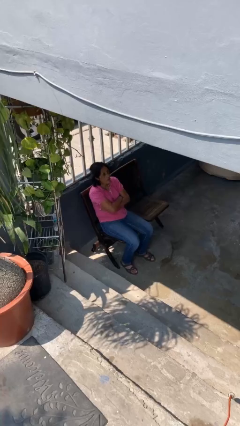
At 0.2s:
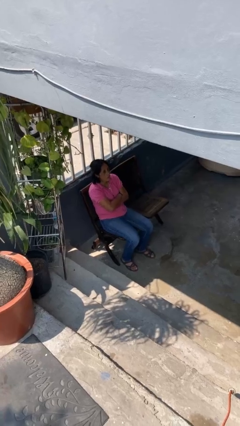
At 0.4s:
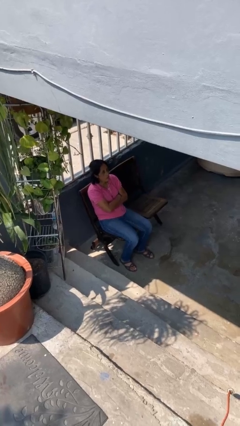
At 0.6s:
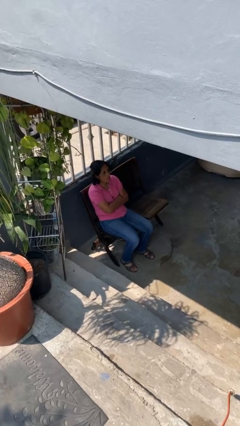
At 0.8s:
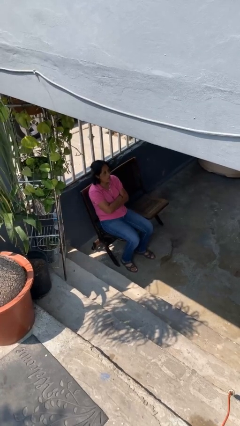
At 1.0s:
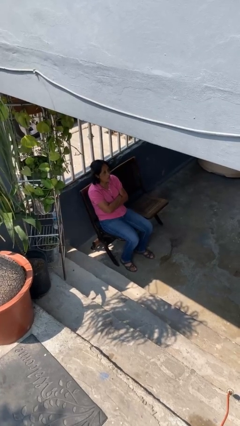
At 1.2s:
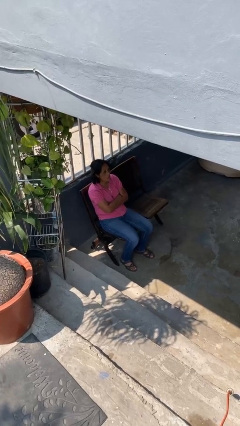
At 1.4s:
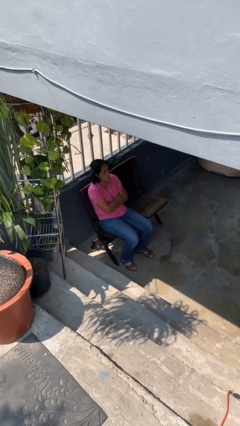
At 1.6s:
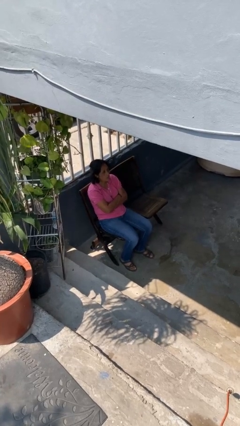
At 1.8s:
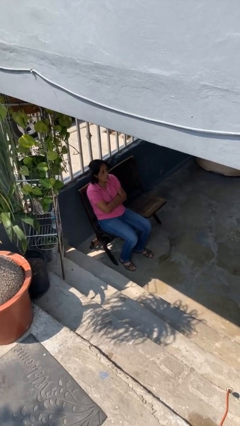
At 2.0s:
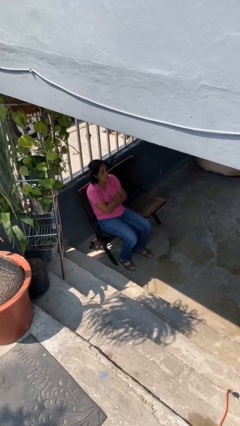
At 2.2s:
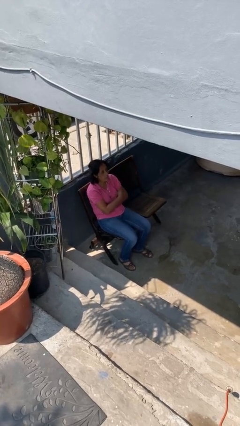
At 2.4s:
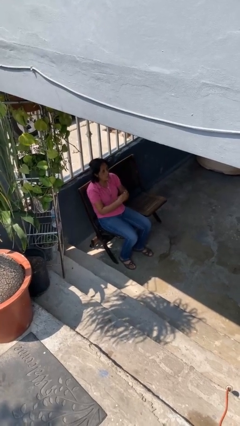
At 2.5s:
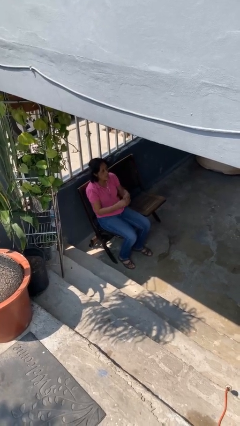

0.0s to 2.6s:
person crosses arms

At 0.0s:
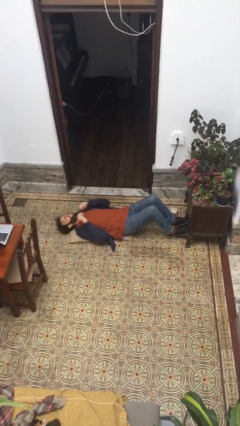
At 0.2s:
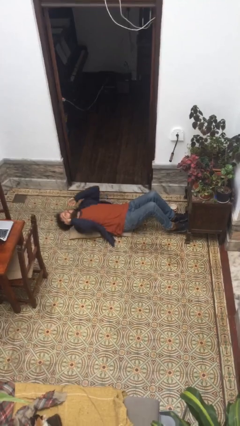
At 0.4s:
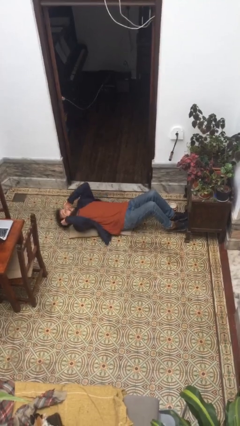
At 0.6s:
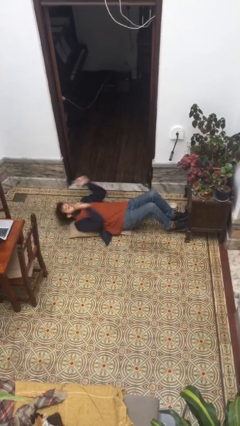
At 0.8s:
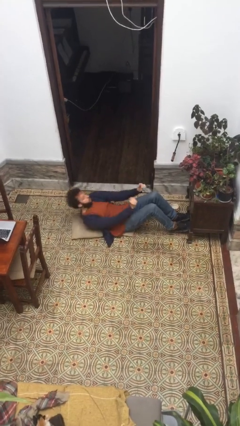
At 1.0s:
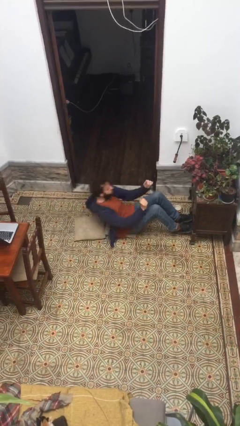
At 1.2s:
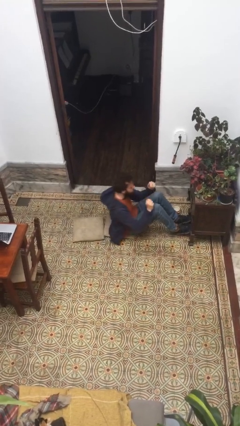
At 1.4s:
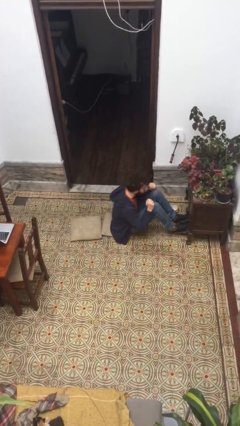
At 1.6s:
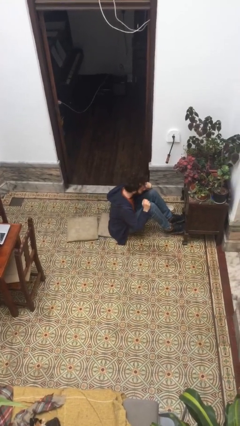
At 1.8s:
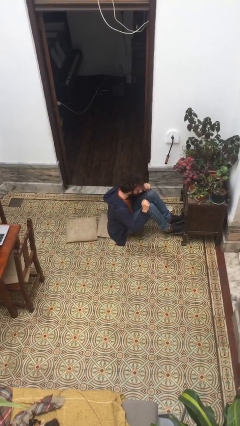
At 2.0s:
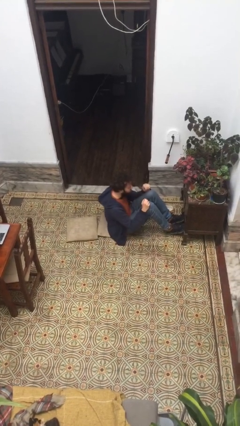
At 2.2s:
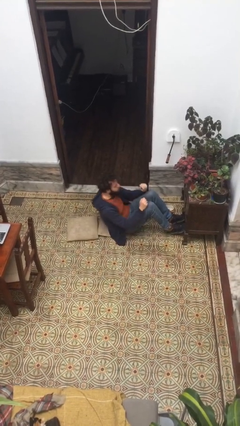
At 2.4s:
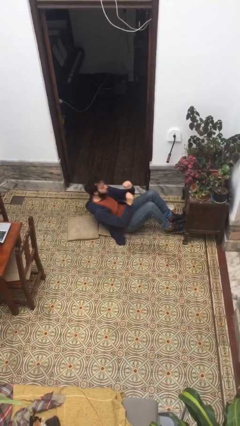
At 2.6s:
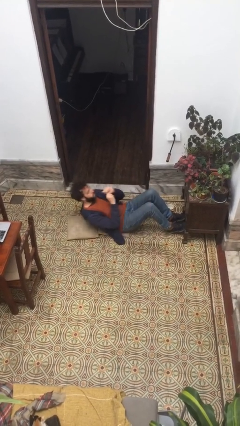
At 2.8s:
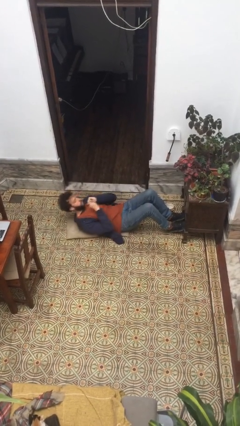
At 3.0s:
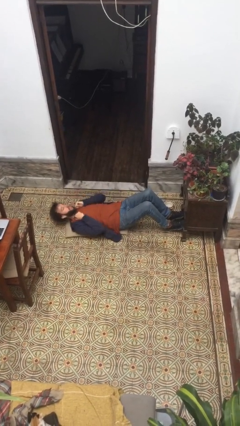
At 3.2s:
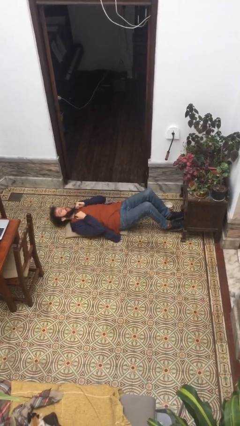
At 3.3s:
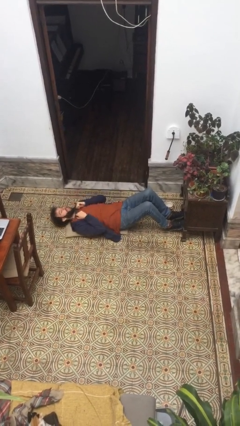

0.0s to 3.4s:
person exercises with situp

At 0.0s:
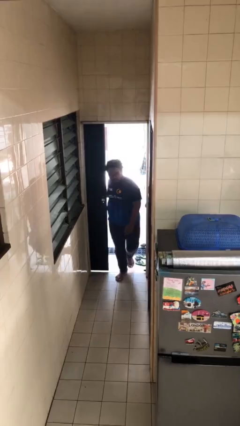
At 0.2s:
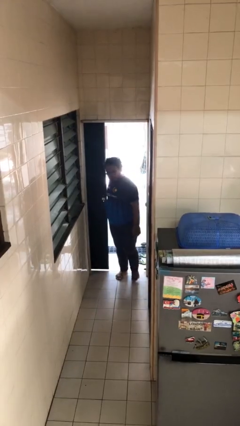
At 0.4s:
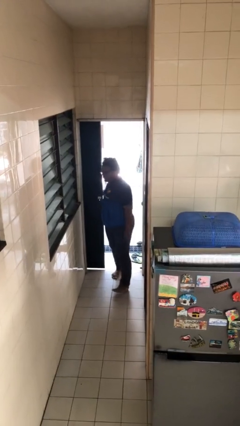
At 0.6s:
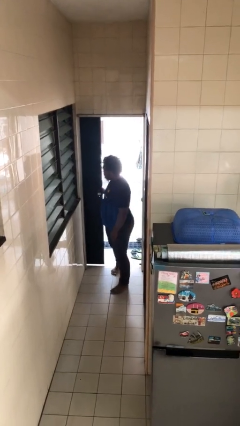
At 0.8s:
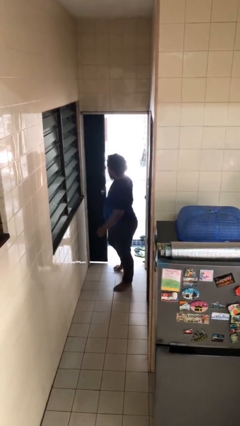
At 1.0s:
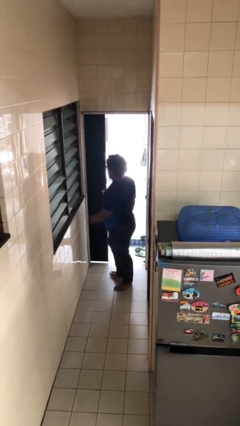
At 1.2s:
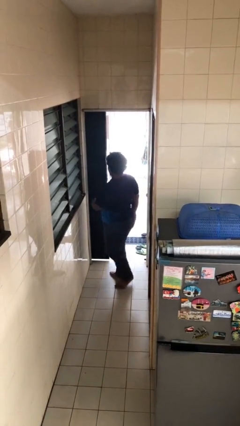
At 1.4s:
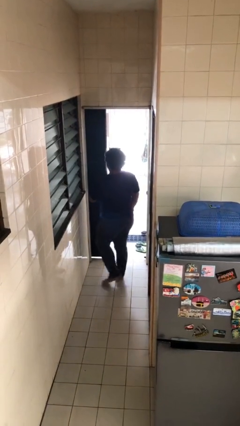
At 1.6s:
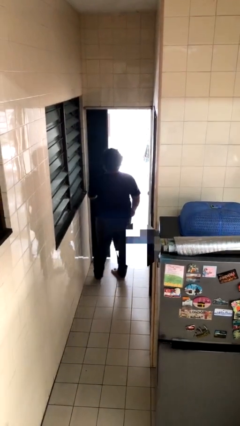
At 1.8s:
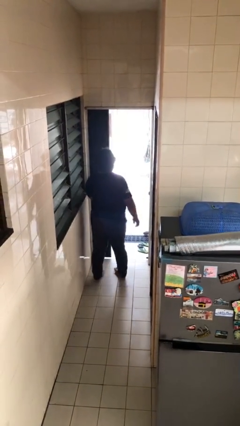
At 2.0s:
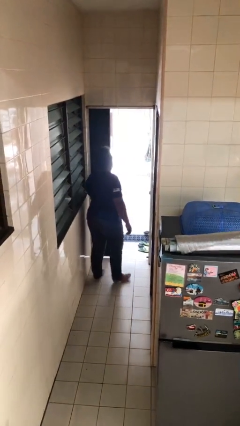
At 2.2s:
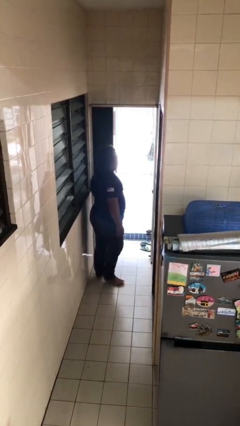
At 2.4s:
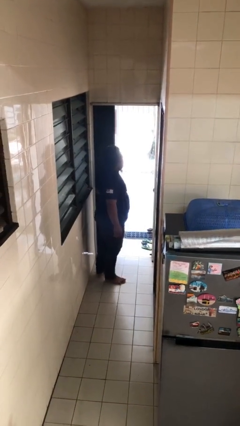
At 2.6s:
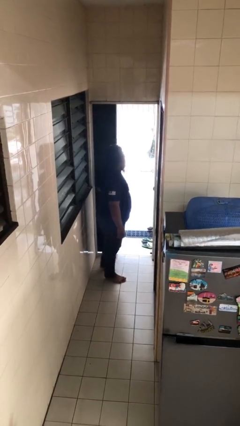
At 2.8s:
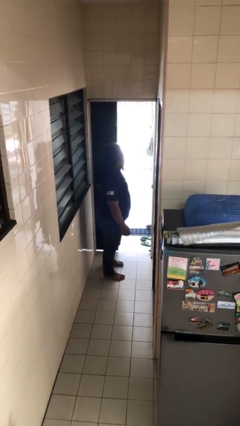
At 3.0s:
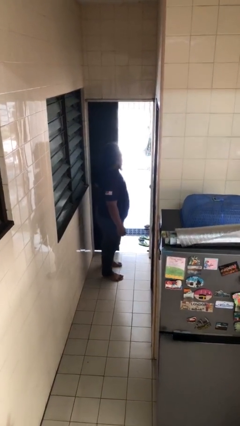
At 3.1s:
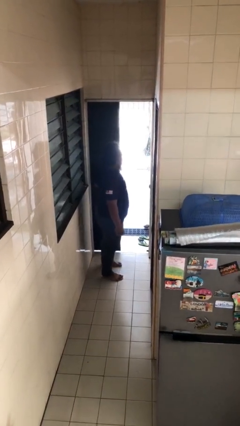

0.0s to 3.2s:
person enters scene through structure

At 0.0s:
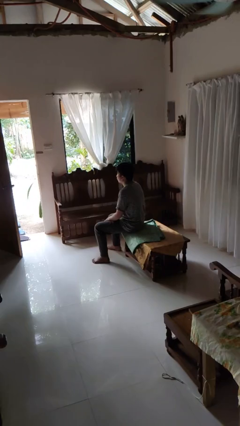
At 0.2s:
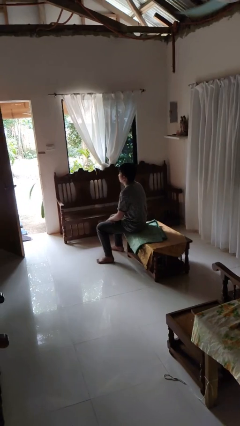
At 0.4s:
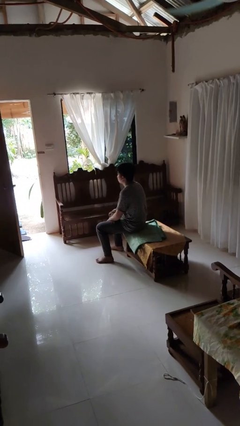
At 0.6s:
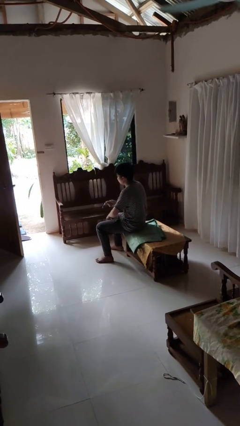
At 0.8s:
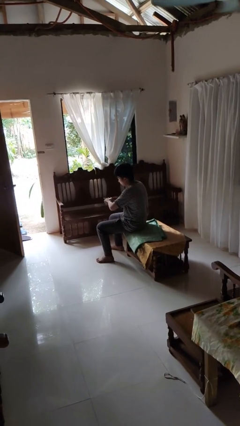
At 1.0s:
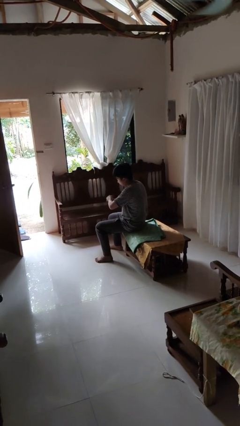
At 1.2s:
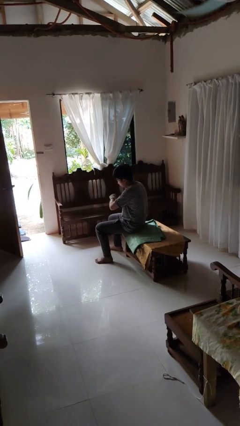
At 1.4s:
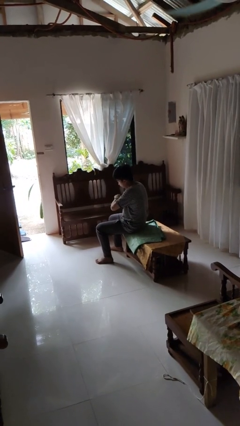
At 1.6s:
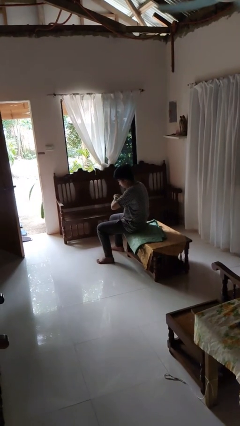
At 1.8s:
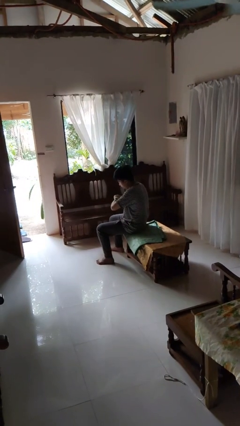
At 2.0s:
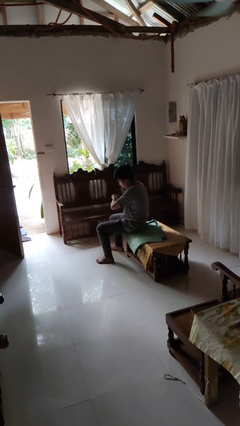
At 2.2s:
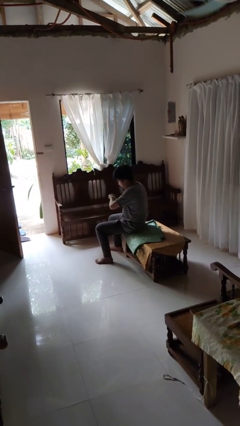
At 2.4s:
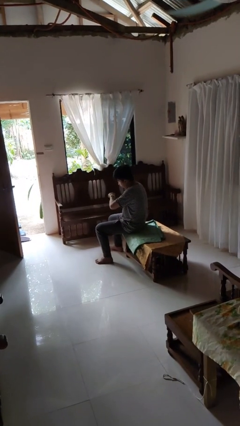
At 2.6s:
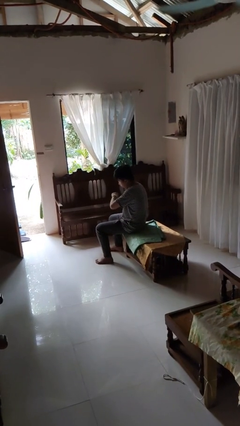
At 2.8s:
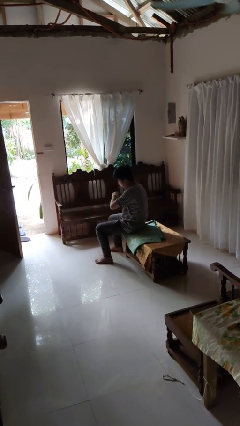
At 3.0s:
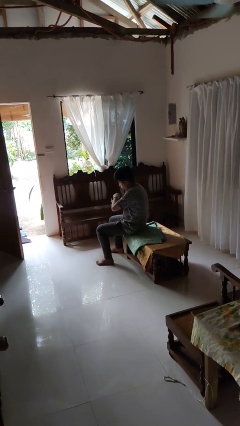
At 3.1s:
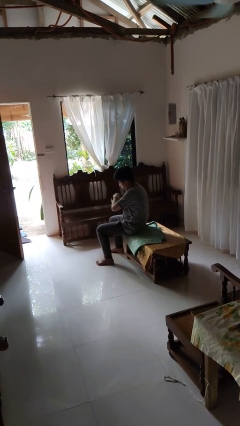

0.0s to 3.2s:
person puts on wristwatch

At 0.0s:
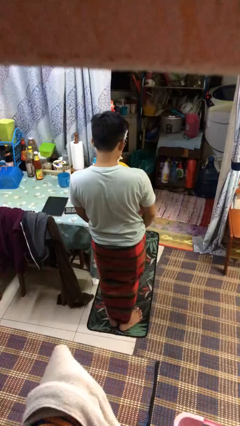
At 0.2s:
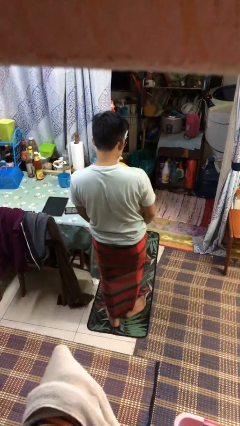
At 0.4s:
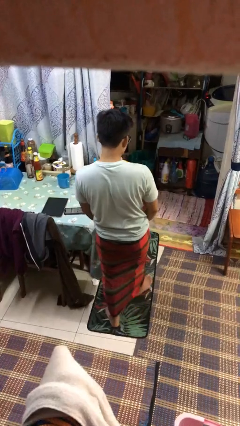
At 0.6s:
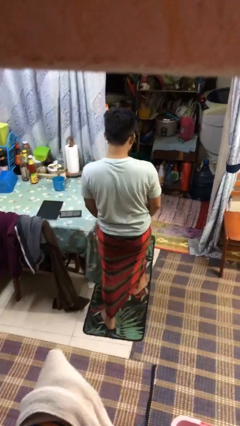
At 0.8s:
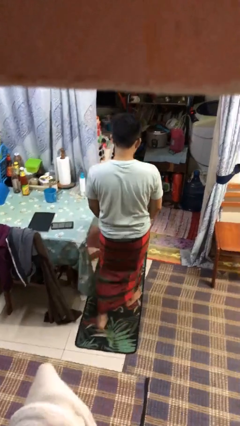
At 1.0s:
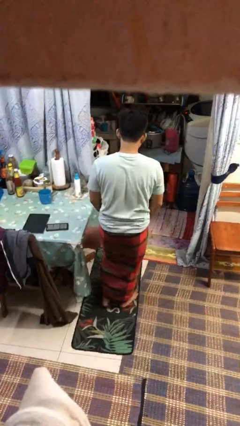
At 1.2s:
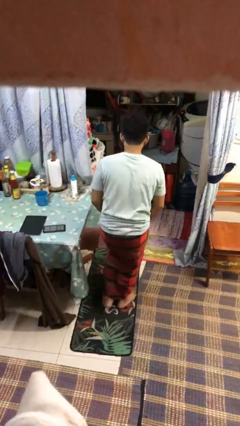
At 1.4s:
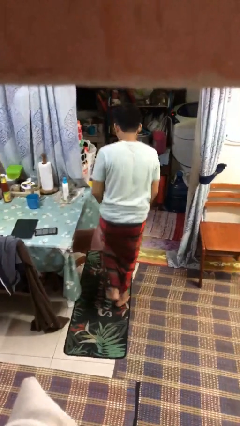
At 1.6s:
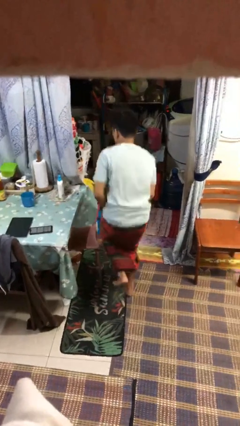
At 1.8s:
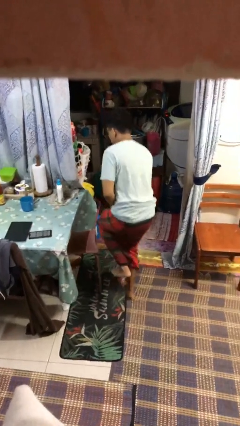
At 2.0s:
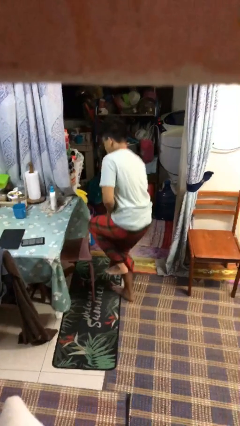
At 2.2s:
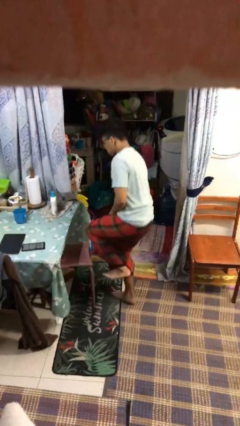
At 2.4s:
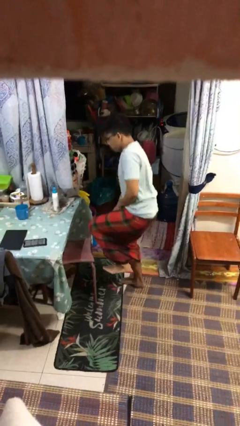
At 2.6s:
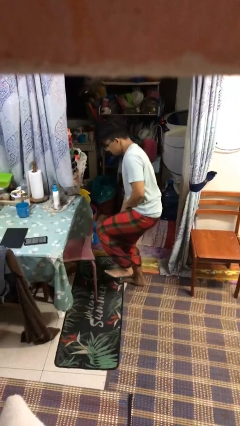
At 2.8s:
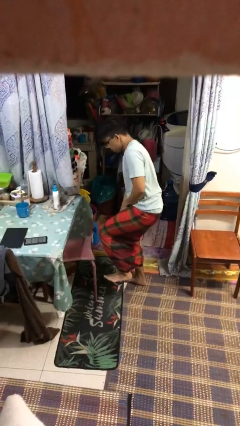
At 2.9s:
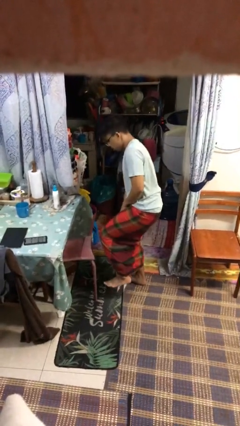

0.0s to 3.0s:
person stubs toe

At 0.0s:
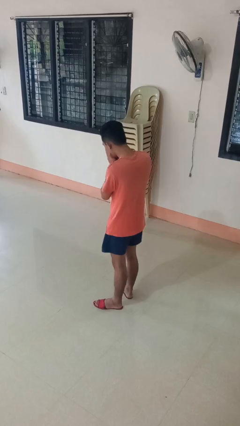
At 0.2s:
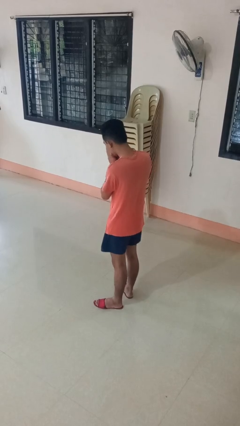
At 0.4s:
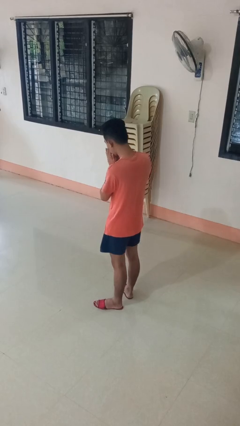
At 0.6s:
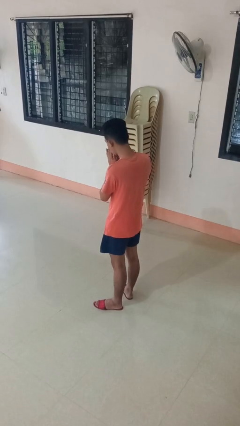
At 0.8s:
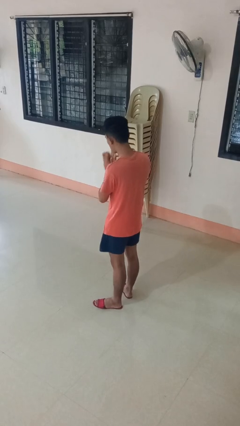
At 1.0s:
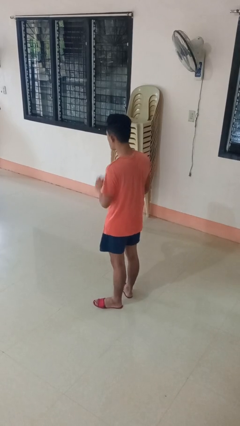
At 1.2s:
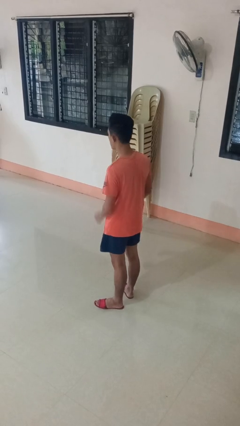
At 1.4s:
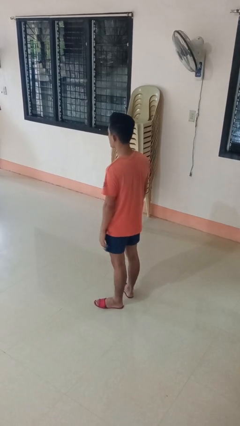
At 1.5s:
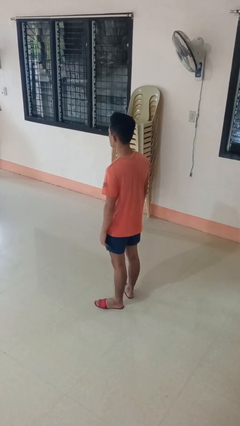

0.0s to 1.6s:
person shrugs

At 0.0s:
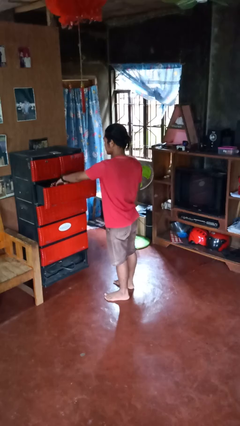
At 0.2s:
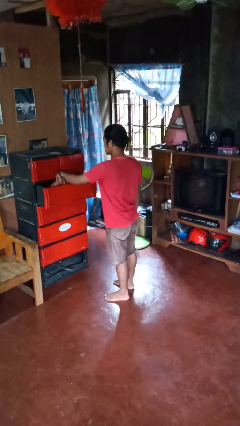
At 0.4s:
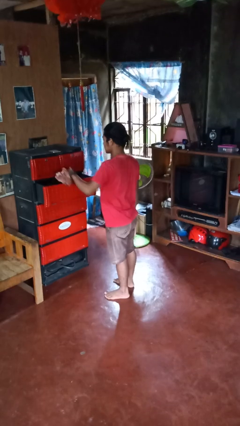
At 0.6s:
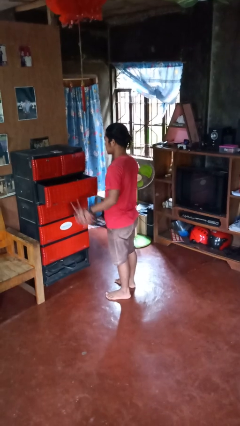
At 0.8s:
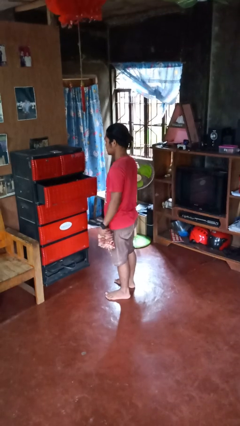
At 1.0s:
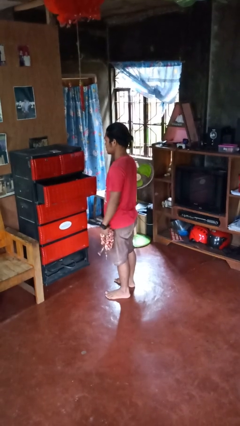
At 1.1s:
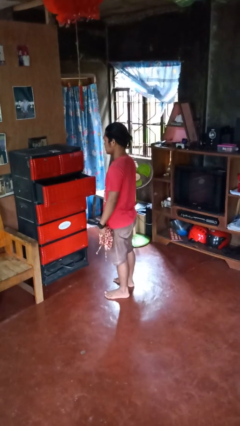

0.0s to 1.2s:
person takes clothes from dresser
